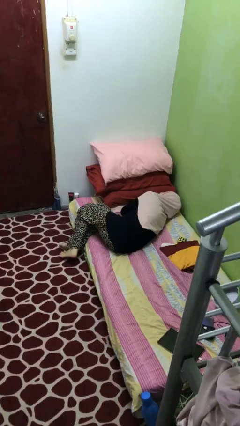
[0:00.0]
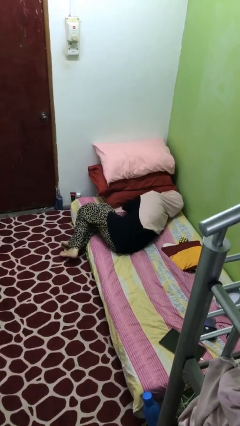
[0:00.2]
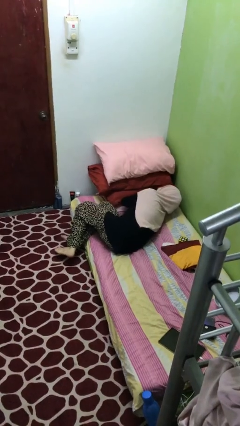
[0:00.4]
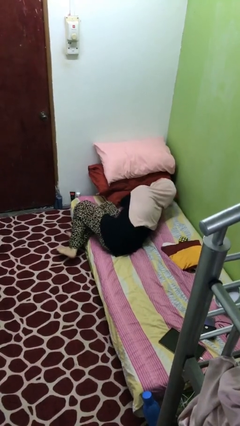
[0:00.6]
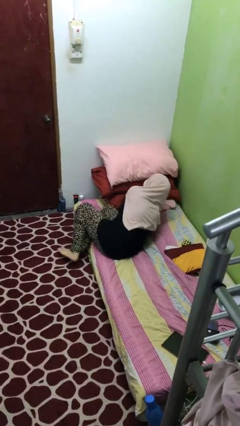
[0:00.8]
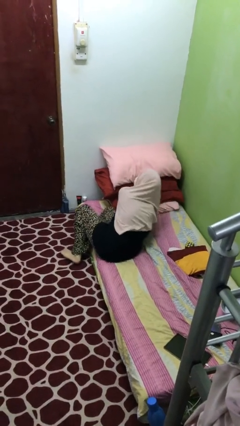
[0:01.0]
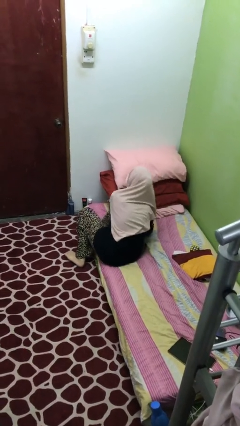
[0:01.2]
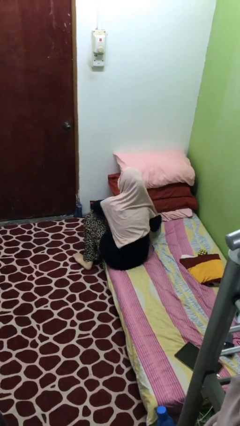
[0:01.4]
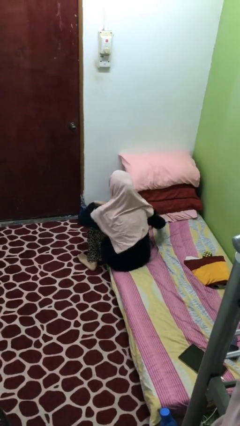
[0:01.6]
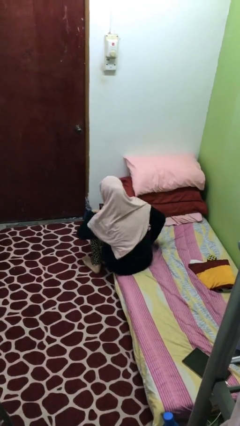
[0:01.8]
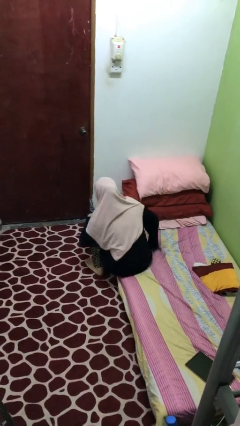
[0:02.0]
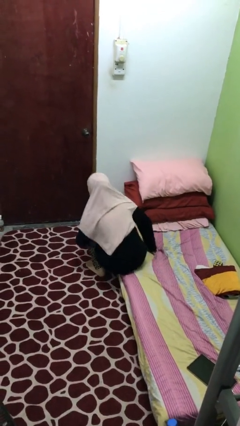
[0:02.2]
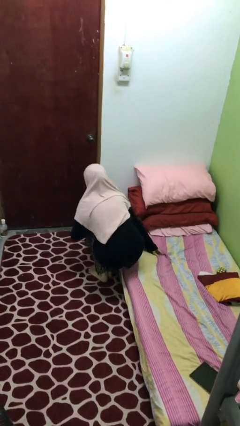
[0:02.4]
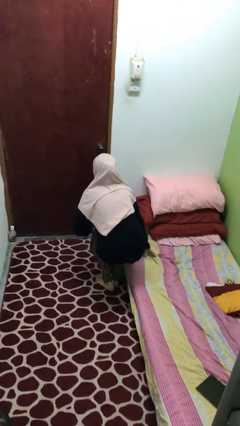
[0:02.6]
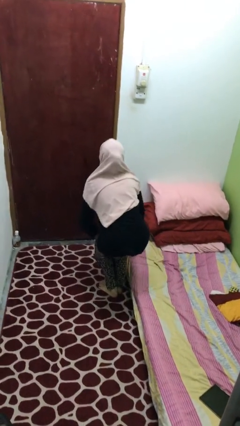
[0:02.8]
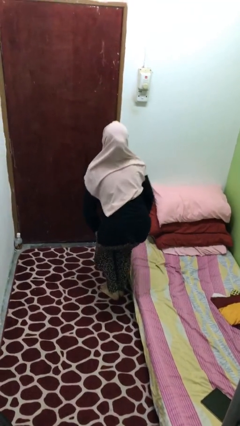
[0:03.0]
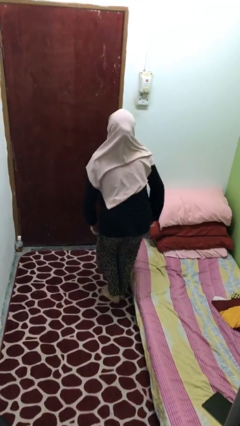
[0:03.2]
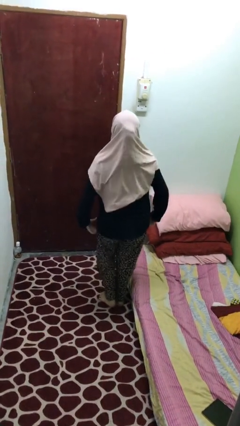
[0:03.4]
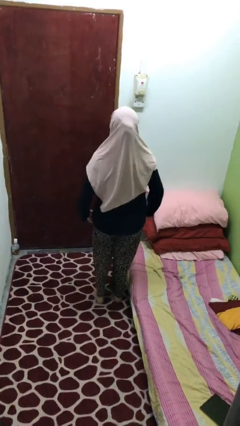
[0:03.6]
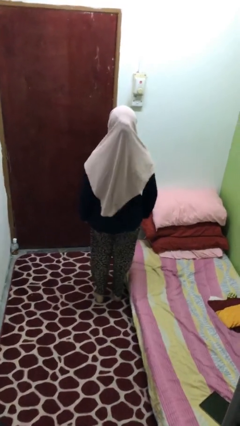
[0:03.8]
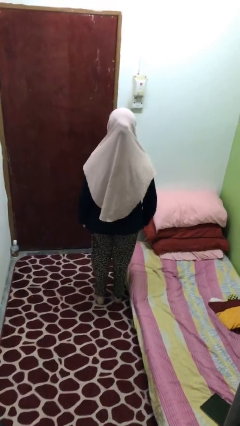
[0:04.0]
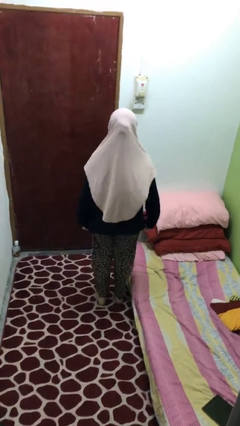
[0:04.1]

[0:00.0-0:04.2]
person stands up

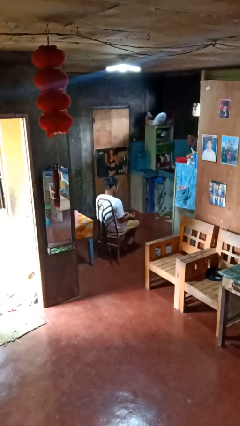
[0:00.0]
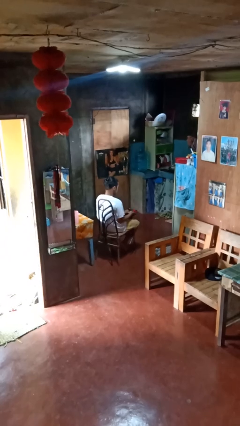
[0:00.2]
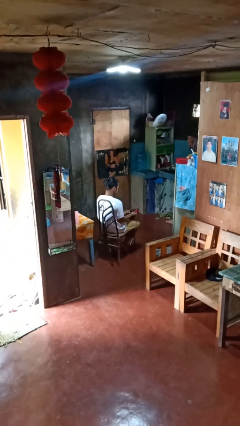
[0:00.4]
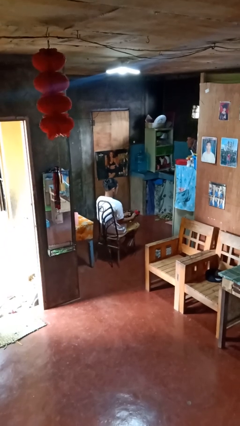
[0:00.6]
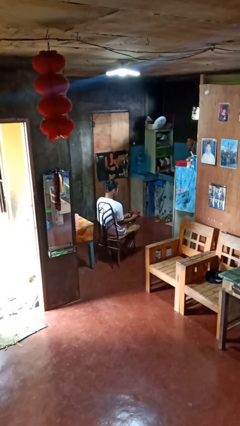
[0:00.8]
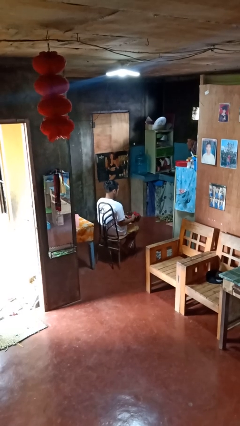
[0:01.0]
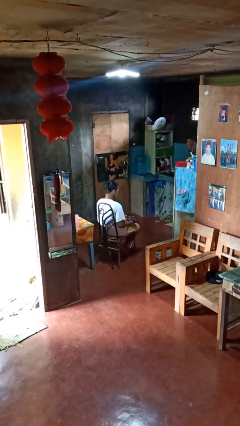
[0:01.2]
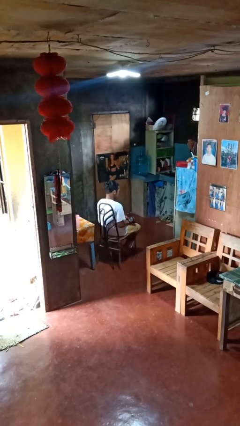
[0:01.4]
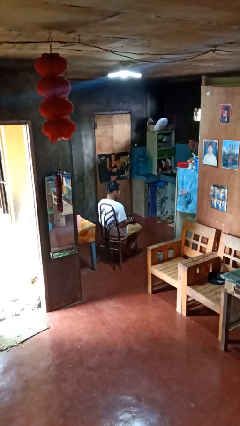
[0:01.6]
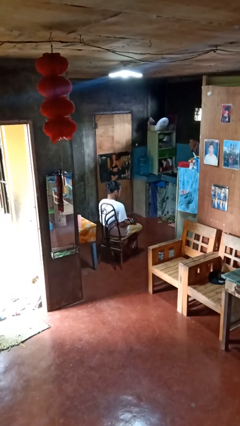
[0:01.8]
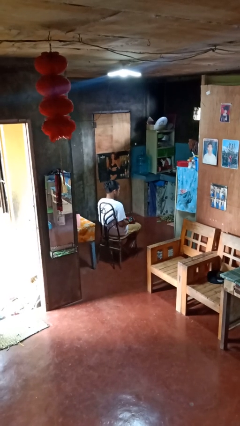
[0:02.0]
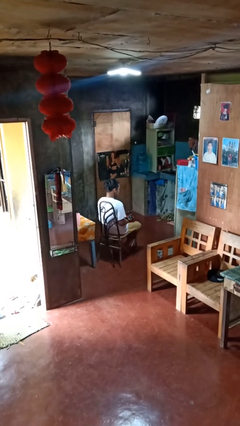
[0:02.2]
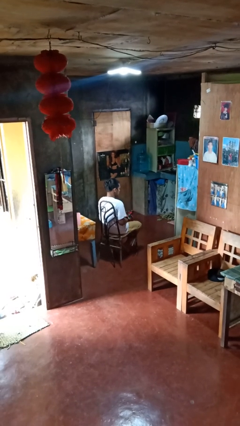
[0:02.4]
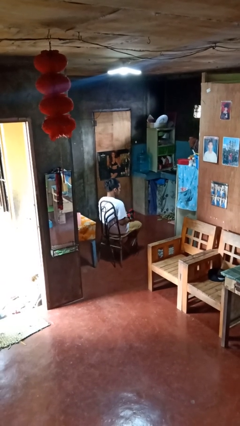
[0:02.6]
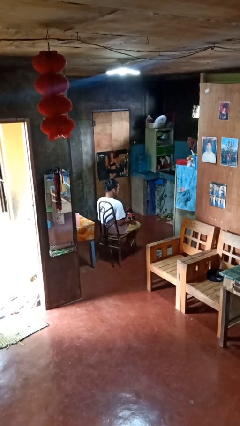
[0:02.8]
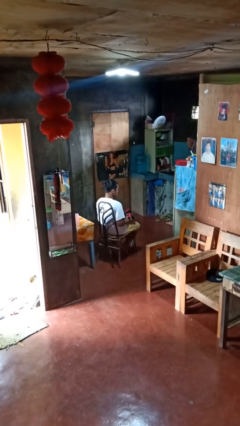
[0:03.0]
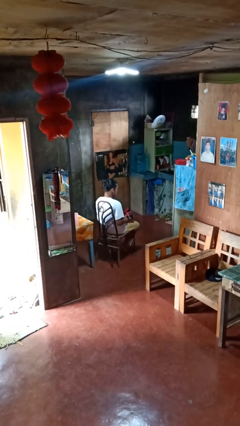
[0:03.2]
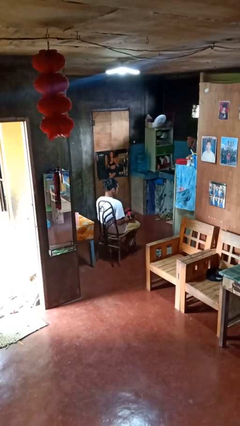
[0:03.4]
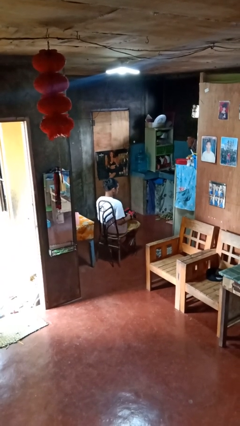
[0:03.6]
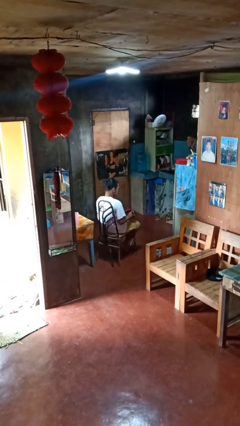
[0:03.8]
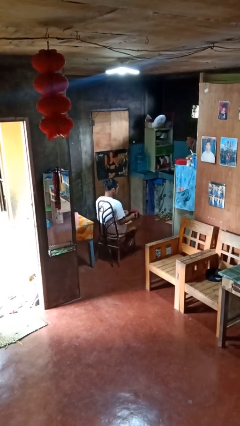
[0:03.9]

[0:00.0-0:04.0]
person puts on gloves

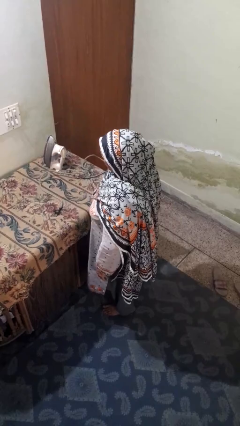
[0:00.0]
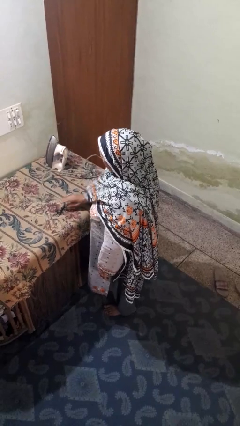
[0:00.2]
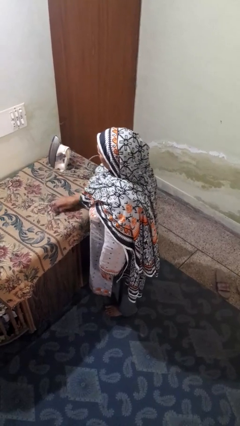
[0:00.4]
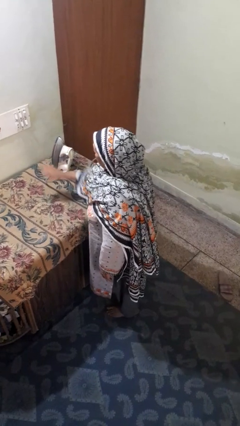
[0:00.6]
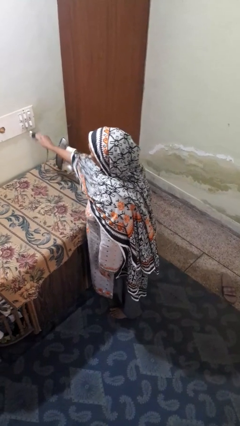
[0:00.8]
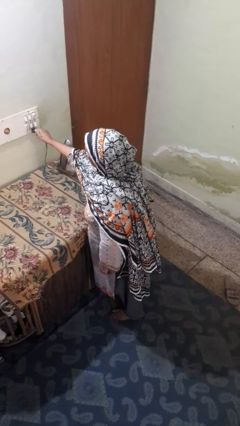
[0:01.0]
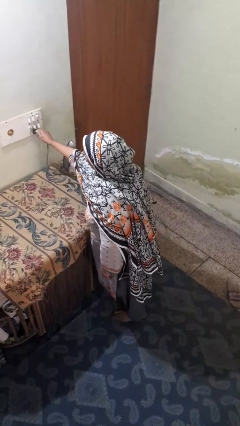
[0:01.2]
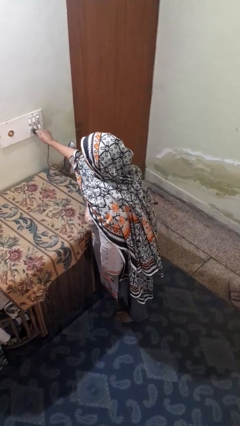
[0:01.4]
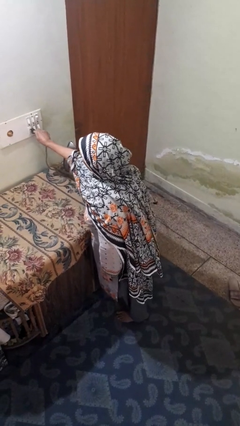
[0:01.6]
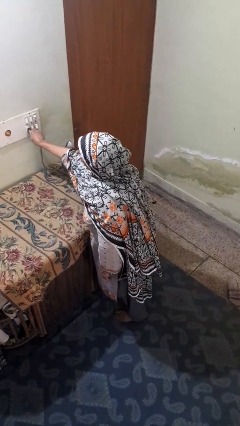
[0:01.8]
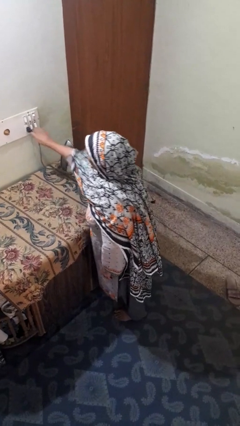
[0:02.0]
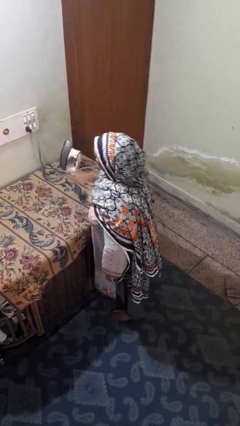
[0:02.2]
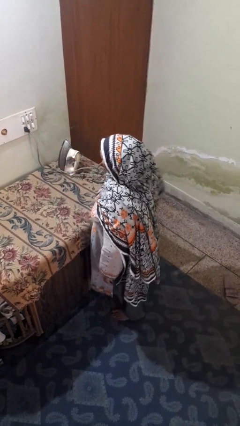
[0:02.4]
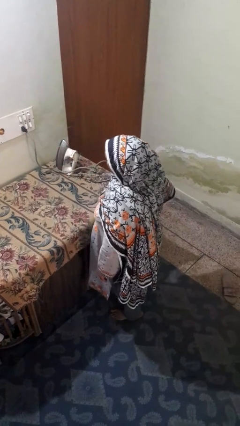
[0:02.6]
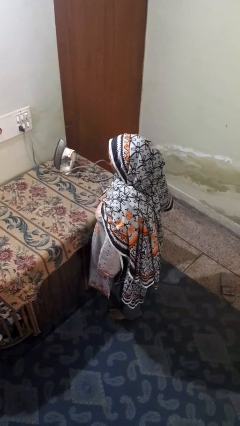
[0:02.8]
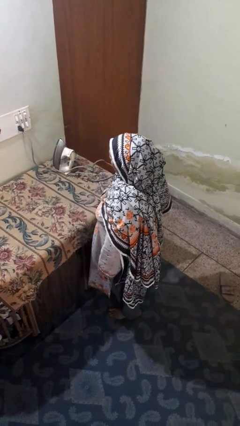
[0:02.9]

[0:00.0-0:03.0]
person plugs into electrical socket

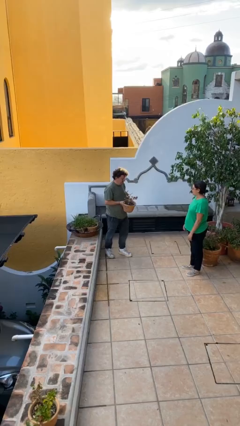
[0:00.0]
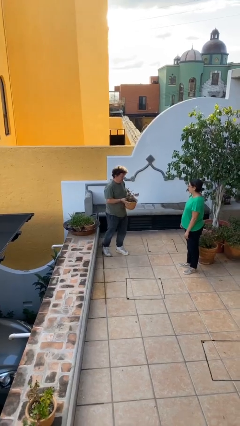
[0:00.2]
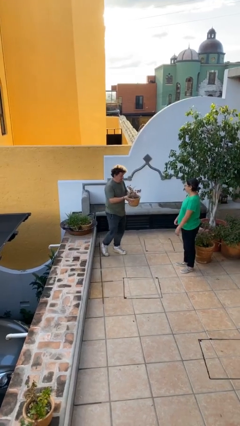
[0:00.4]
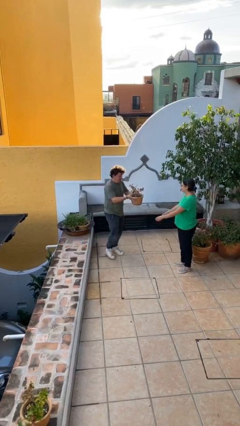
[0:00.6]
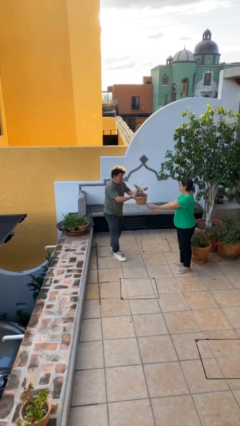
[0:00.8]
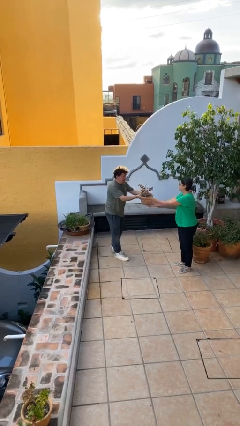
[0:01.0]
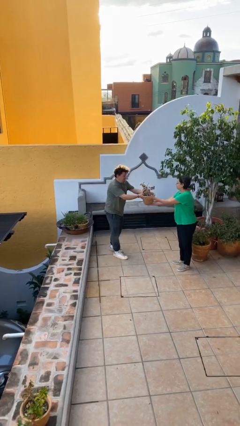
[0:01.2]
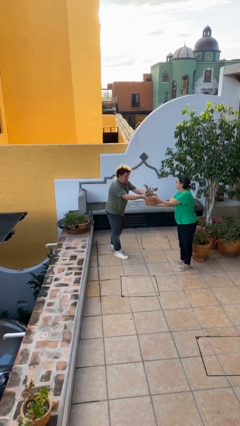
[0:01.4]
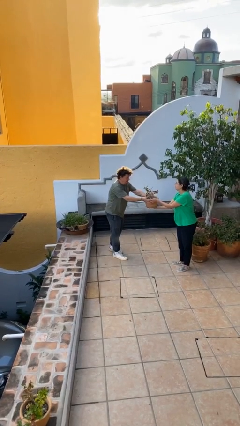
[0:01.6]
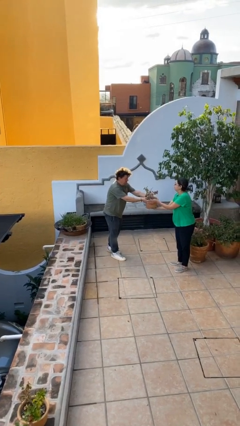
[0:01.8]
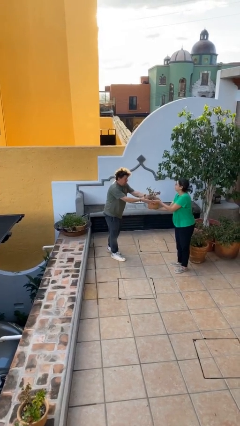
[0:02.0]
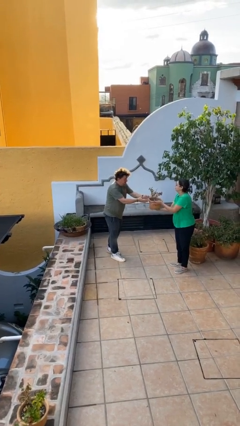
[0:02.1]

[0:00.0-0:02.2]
person transfers object to person

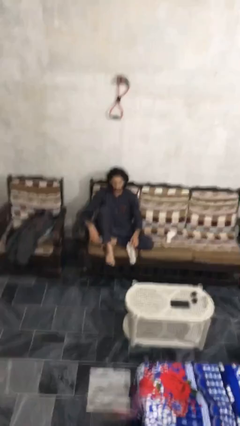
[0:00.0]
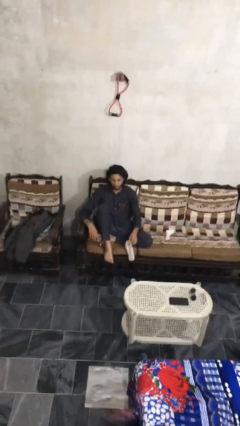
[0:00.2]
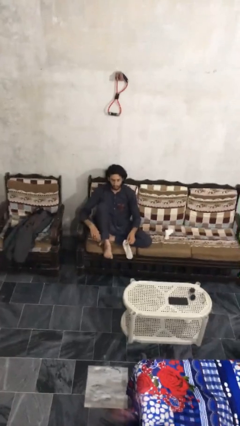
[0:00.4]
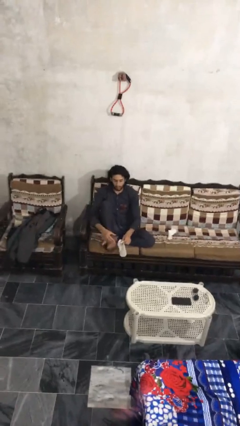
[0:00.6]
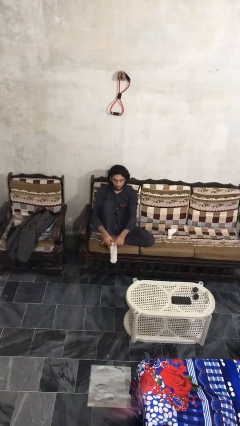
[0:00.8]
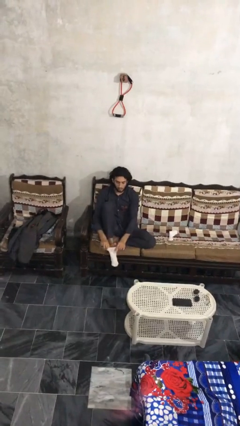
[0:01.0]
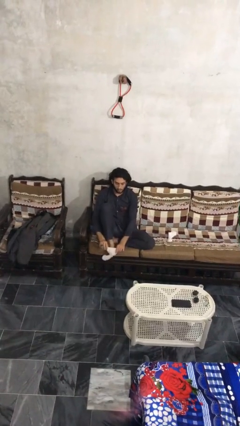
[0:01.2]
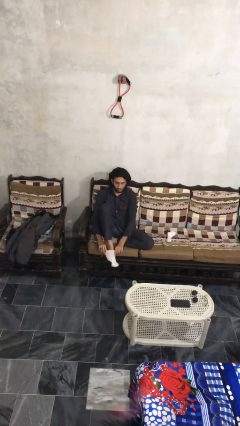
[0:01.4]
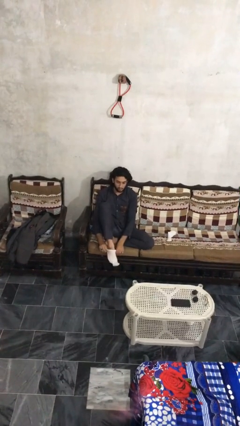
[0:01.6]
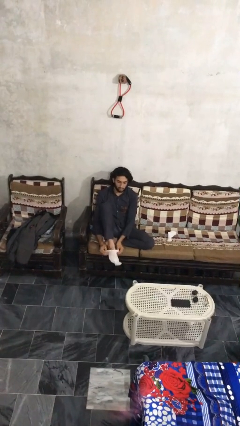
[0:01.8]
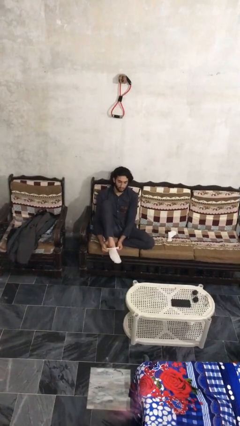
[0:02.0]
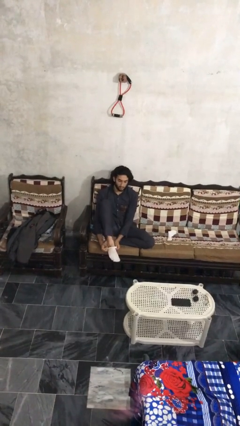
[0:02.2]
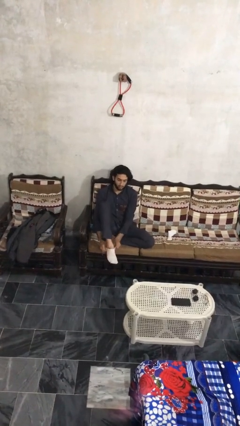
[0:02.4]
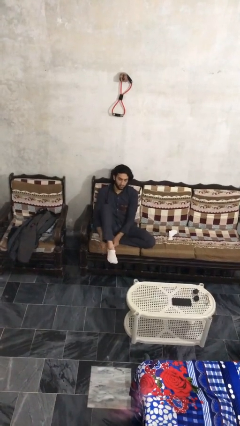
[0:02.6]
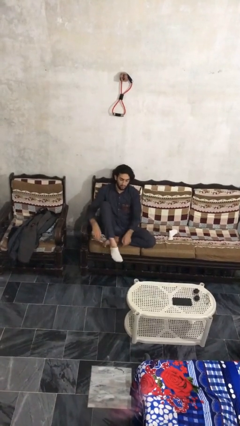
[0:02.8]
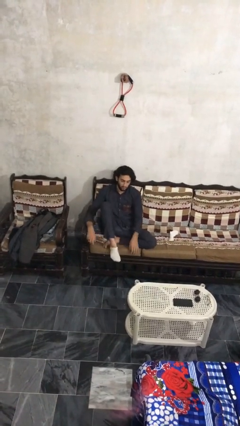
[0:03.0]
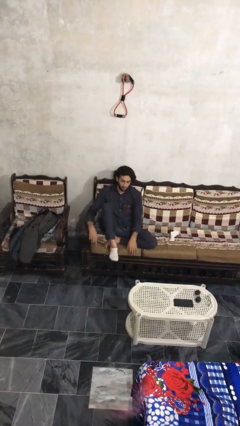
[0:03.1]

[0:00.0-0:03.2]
person puts on socks

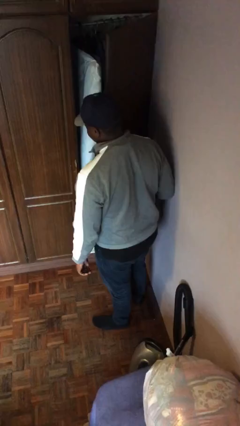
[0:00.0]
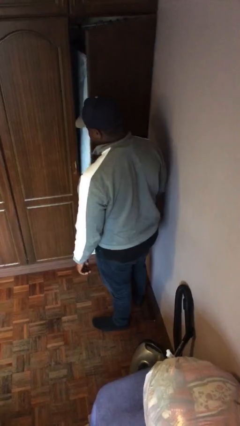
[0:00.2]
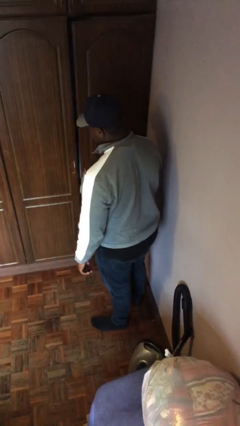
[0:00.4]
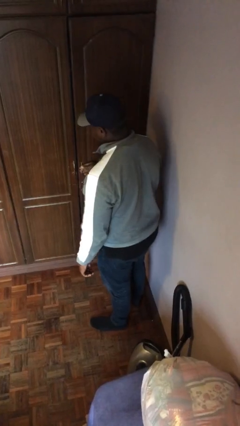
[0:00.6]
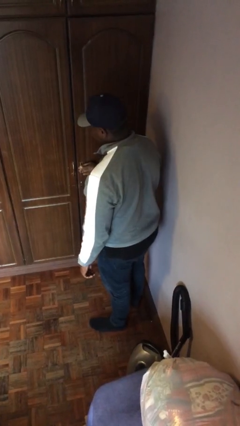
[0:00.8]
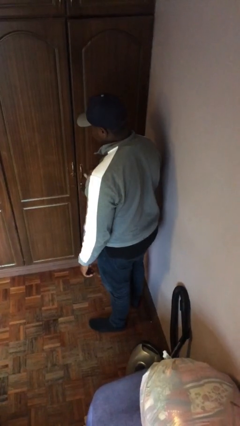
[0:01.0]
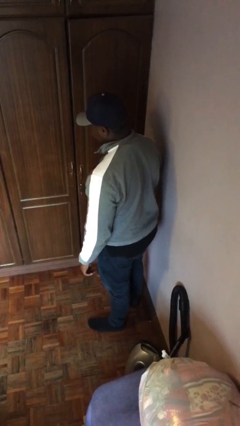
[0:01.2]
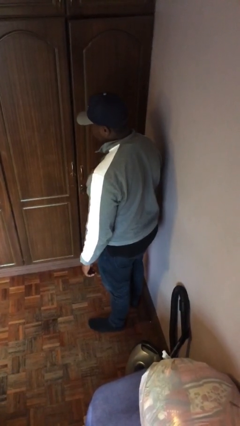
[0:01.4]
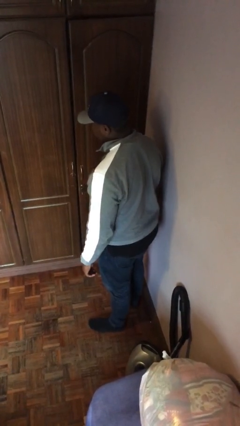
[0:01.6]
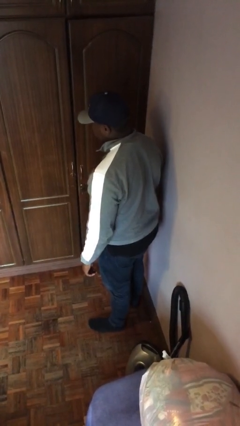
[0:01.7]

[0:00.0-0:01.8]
person closes closet door
